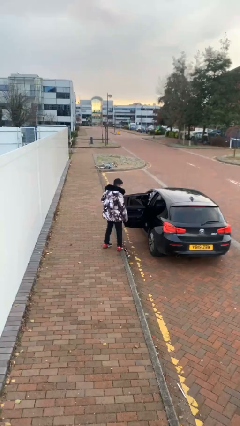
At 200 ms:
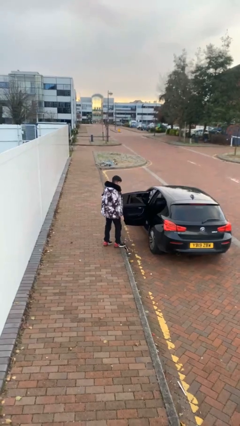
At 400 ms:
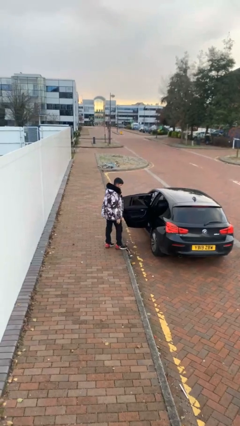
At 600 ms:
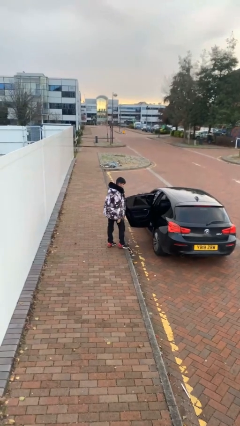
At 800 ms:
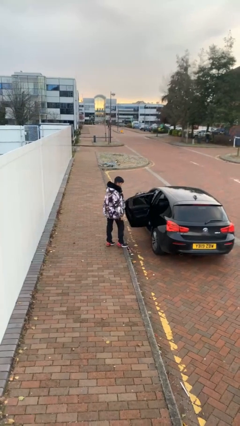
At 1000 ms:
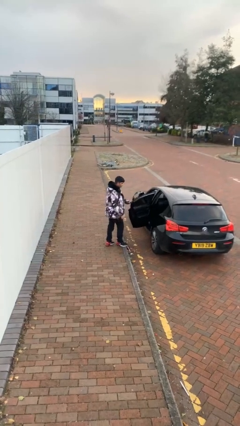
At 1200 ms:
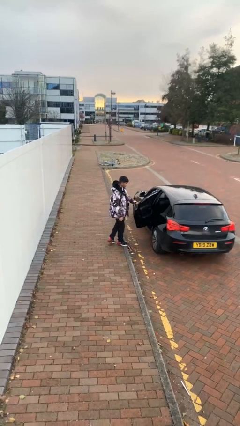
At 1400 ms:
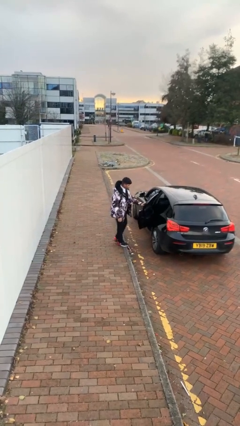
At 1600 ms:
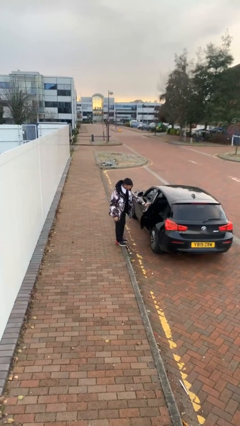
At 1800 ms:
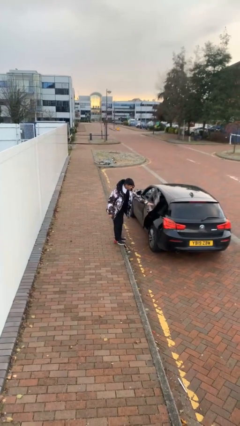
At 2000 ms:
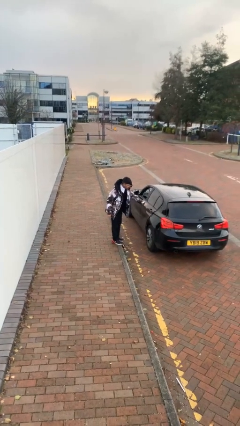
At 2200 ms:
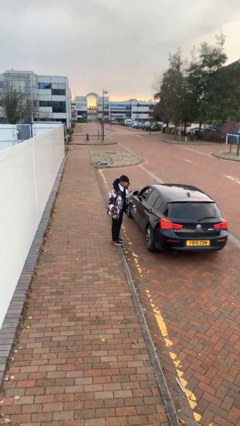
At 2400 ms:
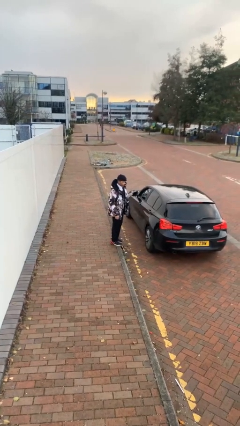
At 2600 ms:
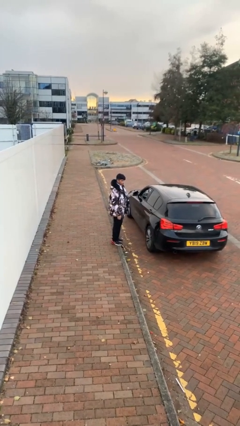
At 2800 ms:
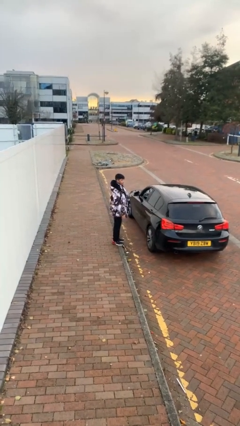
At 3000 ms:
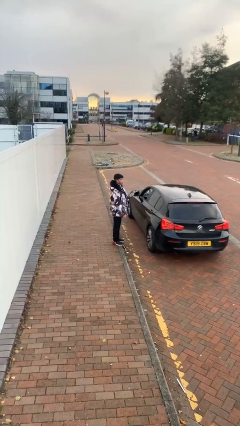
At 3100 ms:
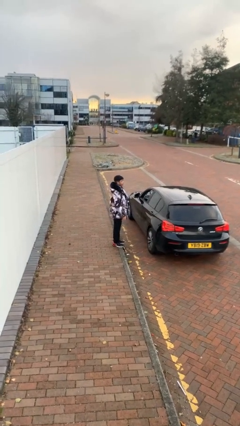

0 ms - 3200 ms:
person closes car door

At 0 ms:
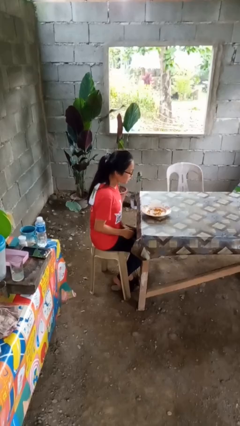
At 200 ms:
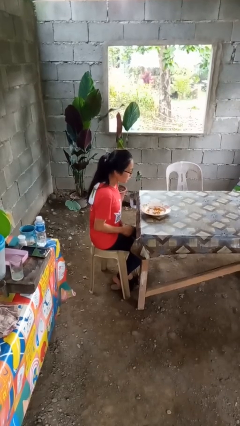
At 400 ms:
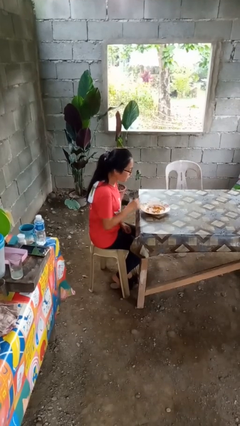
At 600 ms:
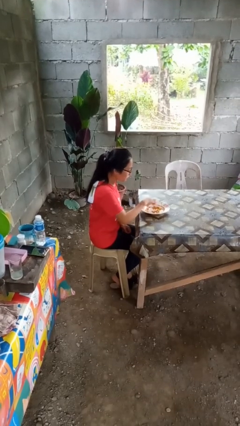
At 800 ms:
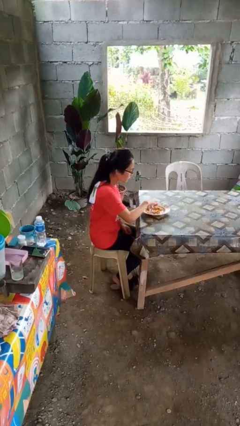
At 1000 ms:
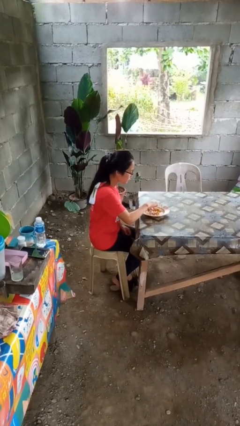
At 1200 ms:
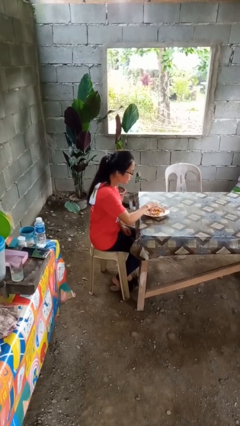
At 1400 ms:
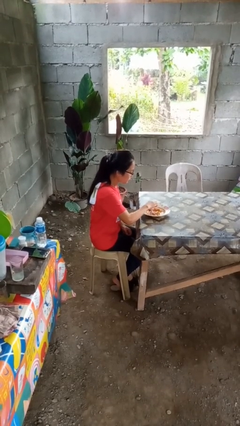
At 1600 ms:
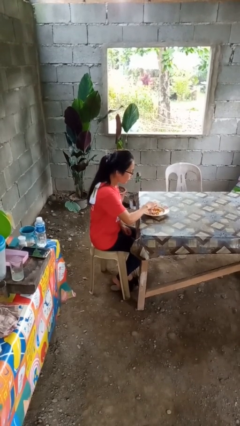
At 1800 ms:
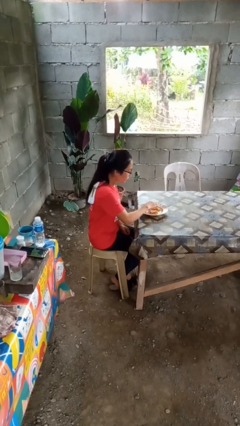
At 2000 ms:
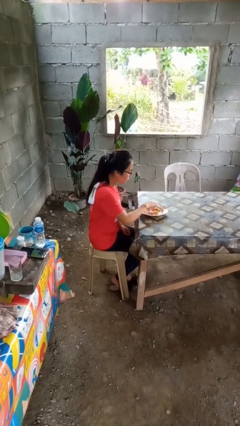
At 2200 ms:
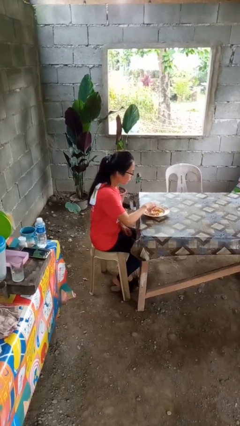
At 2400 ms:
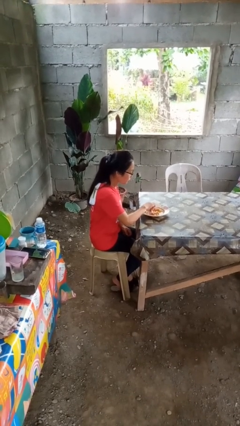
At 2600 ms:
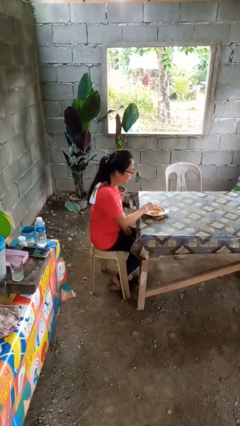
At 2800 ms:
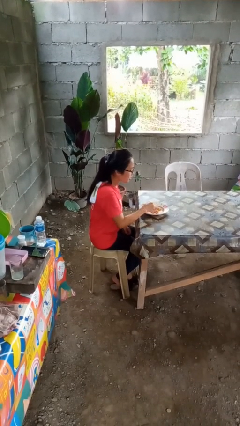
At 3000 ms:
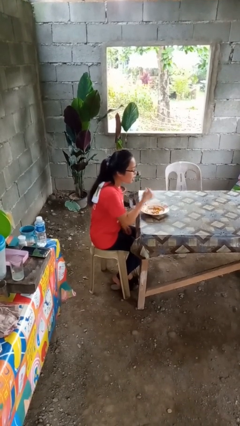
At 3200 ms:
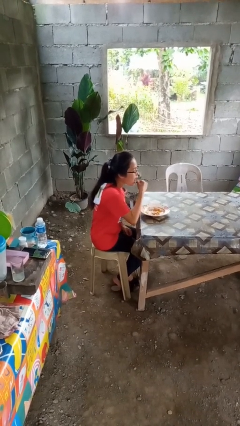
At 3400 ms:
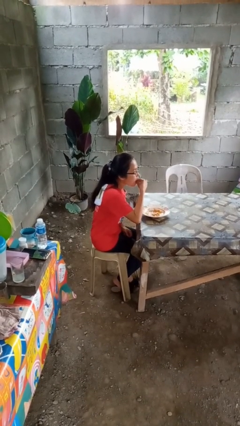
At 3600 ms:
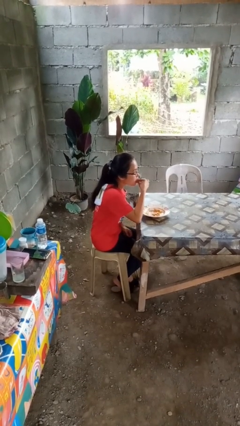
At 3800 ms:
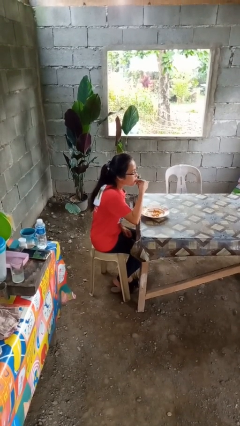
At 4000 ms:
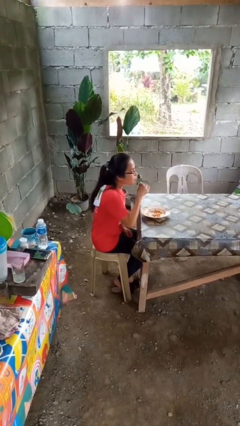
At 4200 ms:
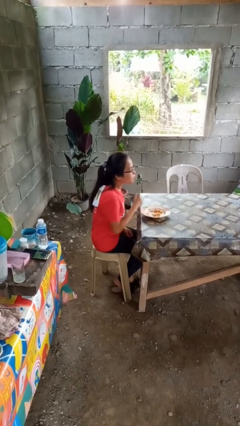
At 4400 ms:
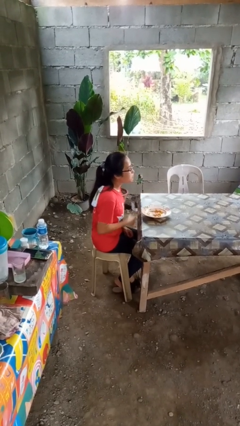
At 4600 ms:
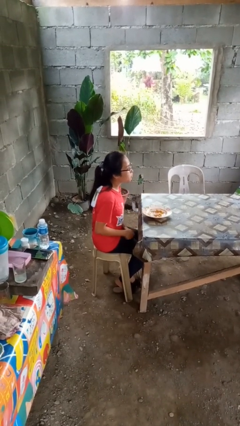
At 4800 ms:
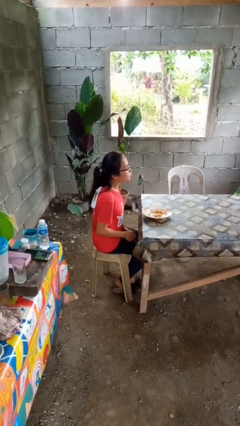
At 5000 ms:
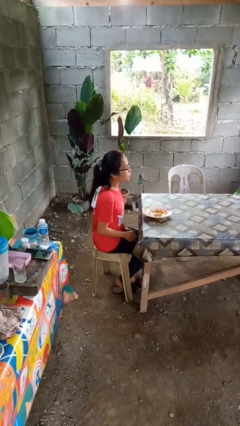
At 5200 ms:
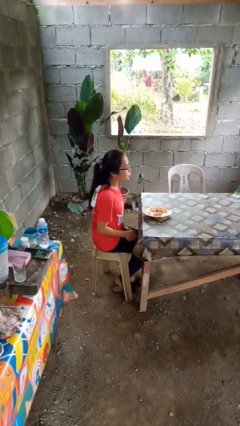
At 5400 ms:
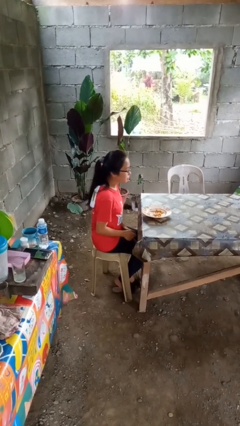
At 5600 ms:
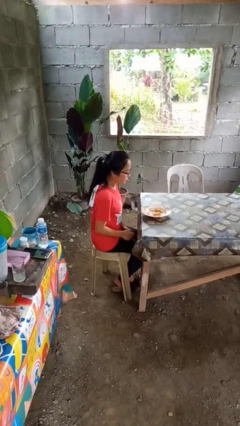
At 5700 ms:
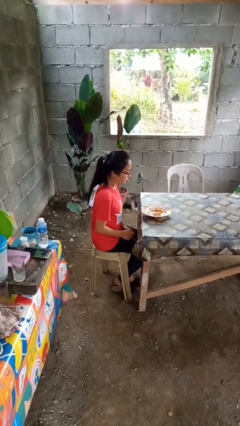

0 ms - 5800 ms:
person eats with hands

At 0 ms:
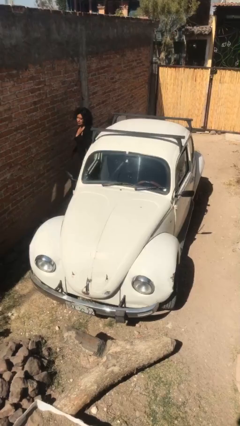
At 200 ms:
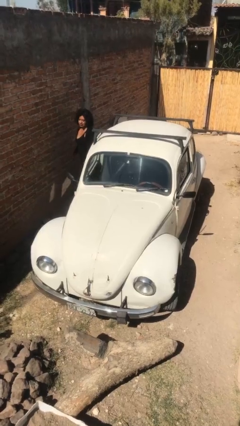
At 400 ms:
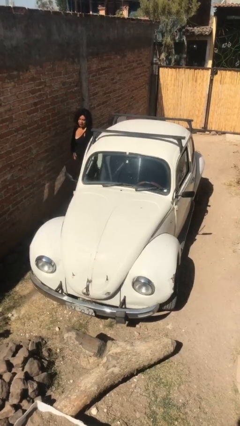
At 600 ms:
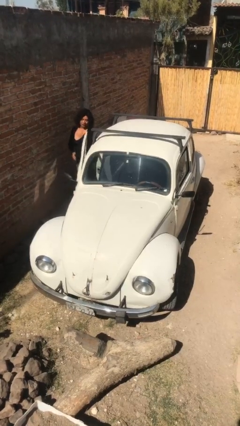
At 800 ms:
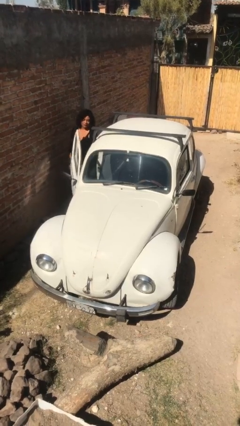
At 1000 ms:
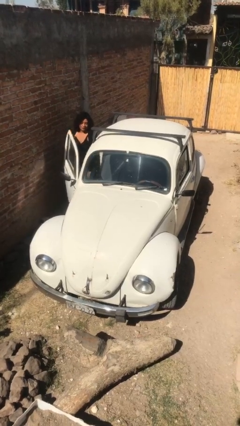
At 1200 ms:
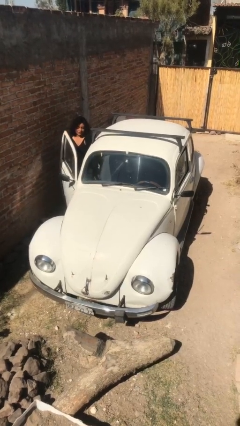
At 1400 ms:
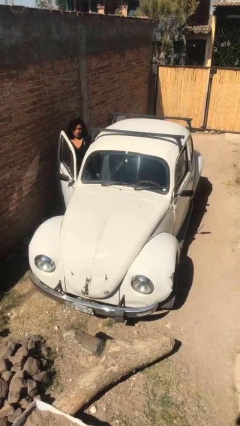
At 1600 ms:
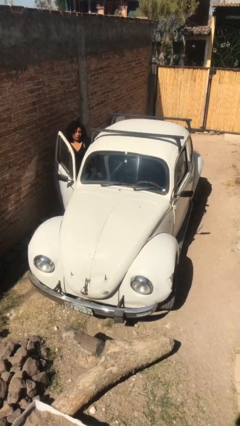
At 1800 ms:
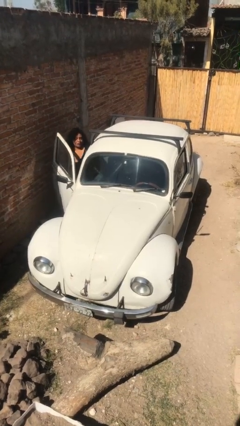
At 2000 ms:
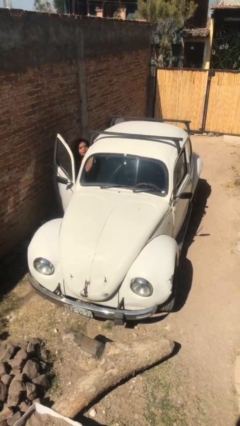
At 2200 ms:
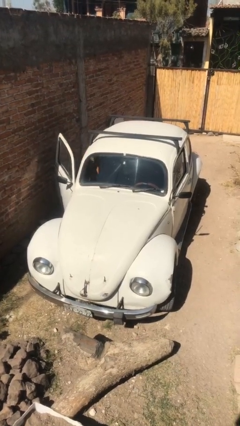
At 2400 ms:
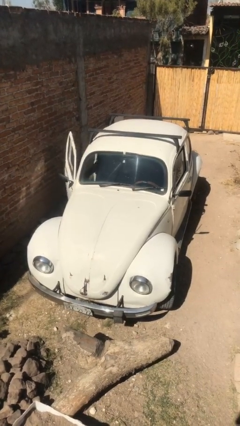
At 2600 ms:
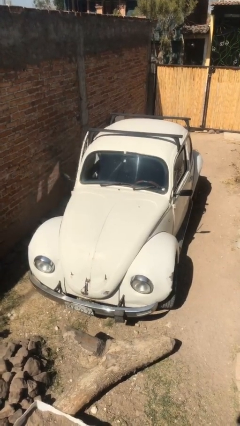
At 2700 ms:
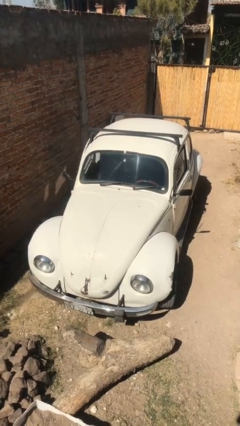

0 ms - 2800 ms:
car picks up person

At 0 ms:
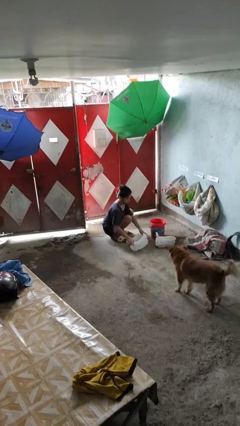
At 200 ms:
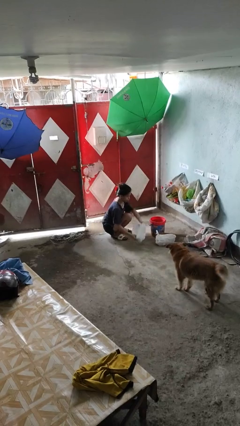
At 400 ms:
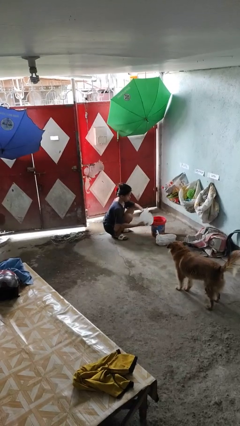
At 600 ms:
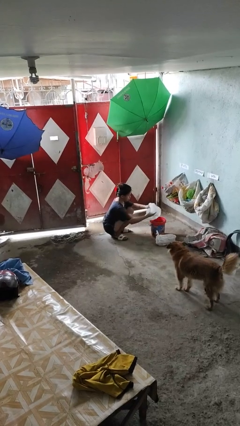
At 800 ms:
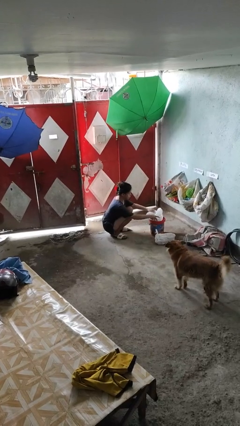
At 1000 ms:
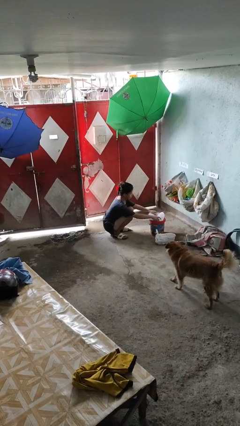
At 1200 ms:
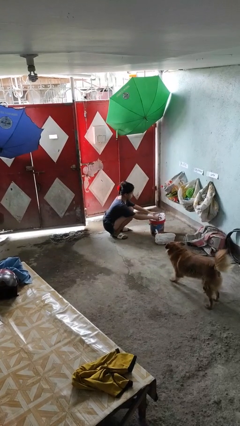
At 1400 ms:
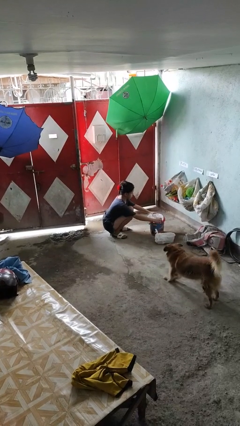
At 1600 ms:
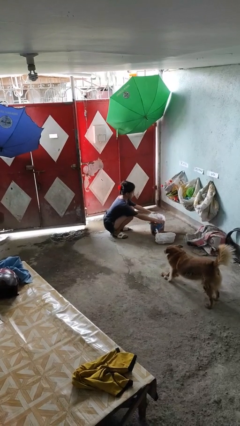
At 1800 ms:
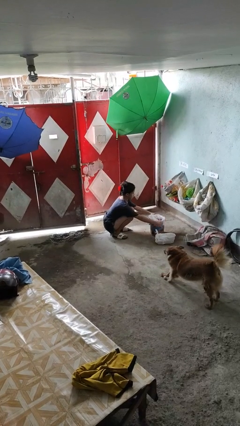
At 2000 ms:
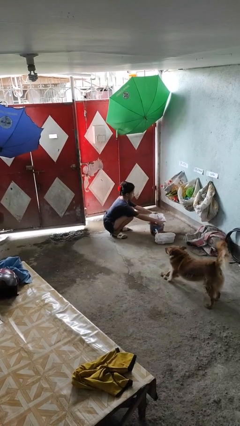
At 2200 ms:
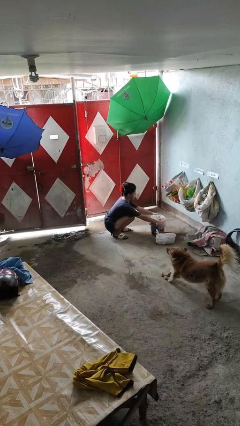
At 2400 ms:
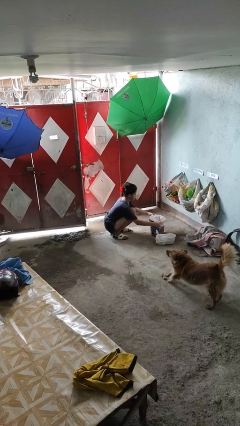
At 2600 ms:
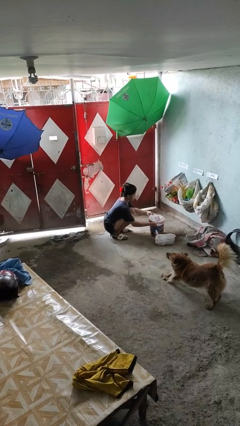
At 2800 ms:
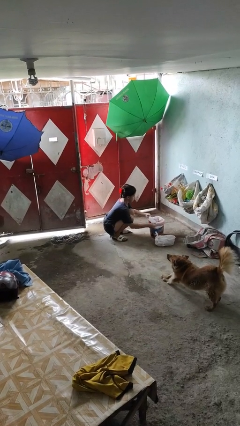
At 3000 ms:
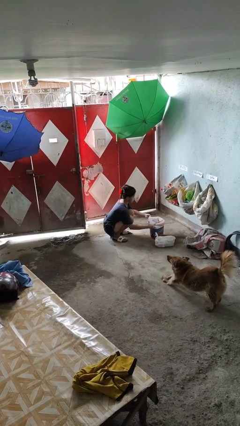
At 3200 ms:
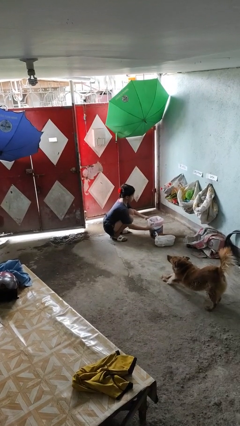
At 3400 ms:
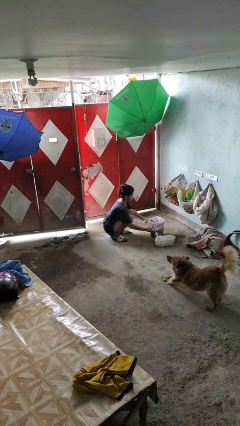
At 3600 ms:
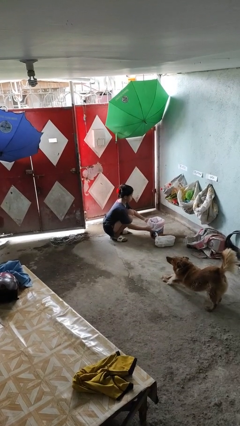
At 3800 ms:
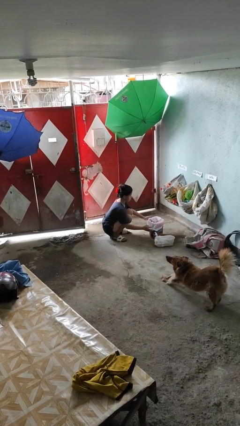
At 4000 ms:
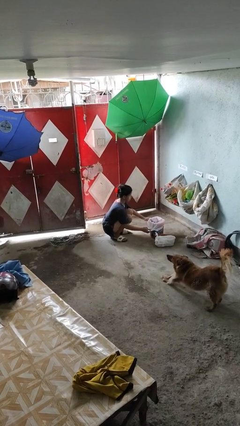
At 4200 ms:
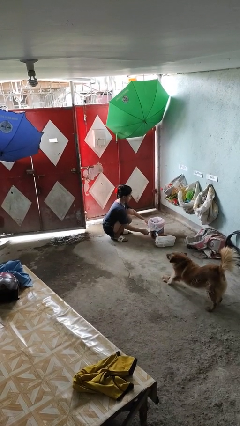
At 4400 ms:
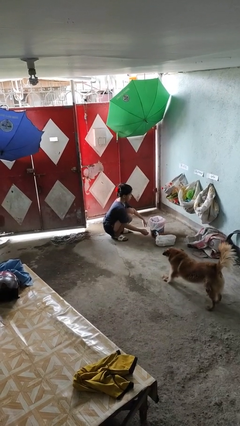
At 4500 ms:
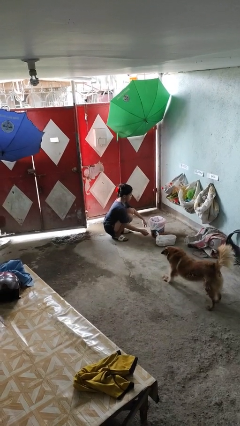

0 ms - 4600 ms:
person inserts trashbag into trashcan

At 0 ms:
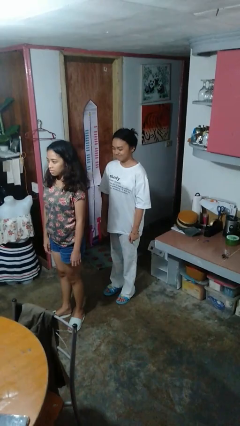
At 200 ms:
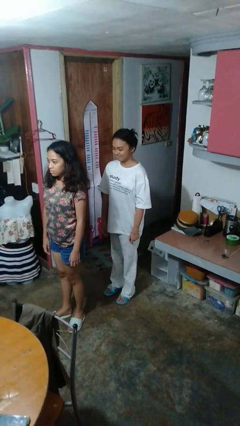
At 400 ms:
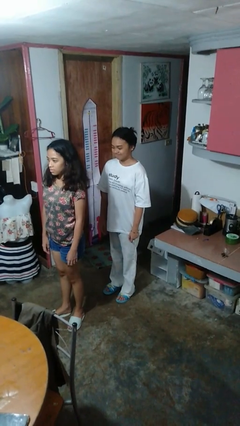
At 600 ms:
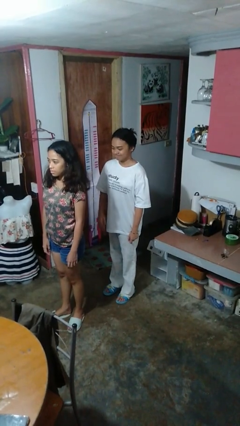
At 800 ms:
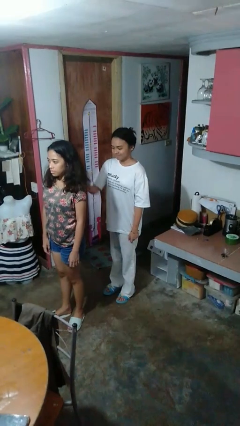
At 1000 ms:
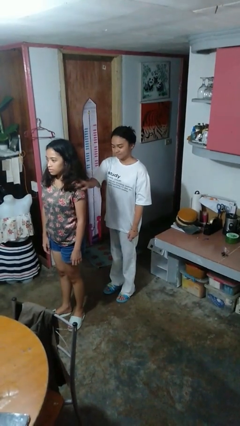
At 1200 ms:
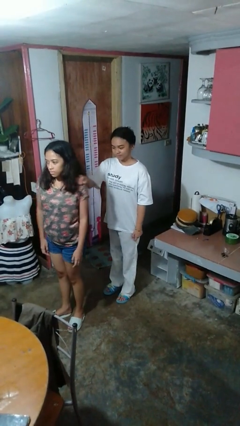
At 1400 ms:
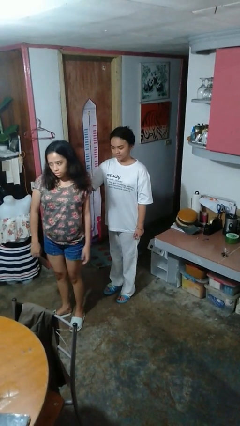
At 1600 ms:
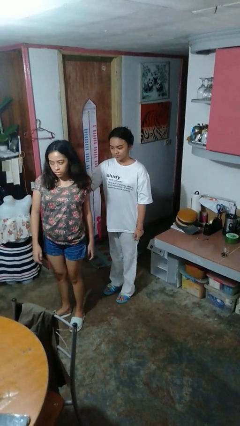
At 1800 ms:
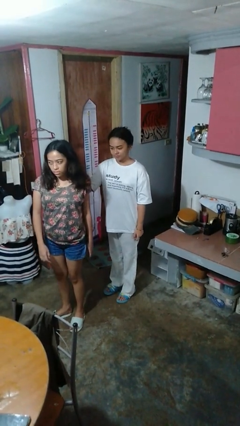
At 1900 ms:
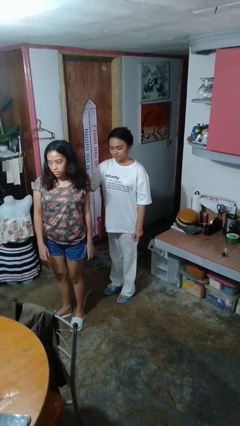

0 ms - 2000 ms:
person grabs person by shoulder
